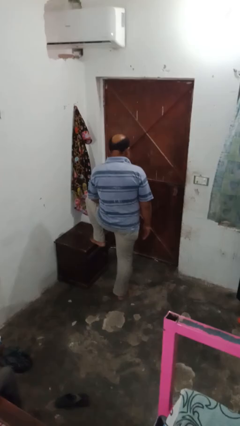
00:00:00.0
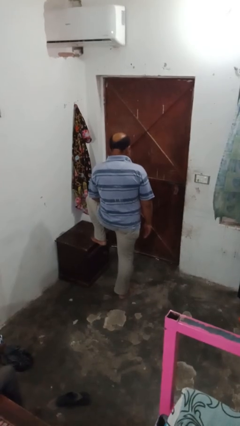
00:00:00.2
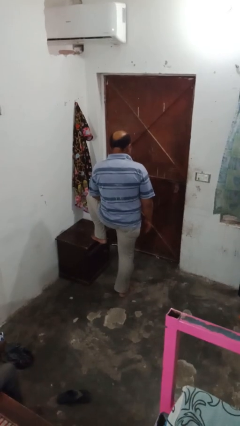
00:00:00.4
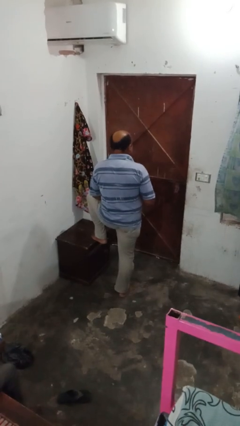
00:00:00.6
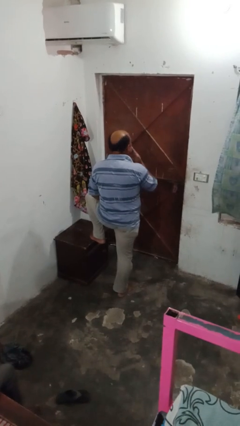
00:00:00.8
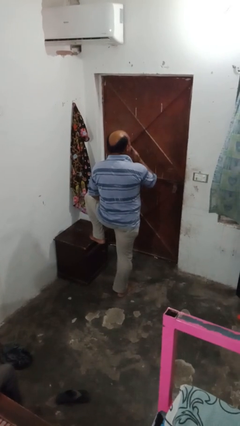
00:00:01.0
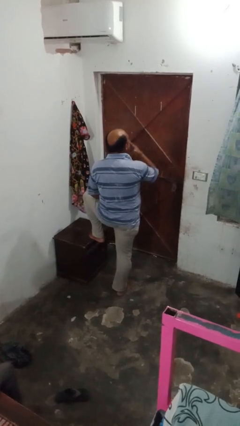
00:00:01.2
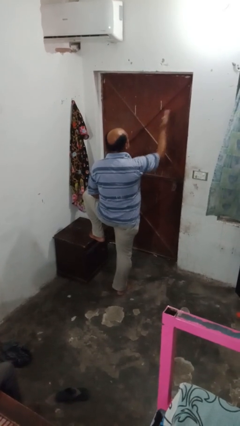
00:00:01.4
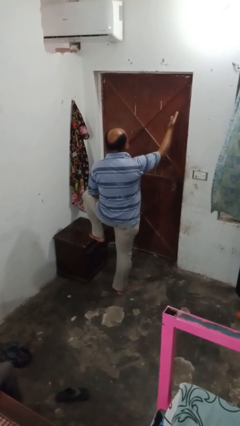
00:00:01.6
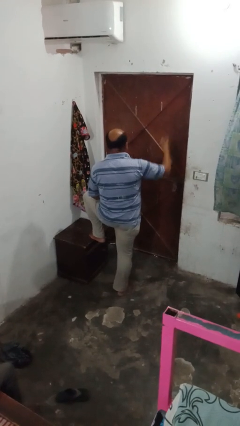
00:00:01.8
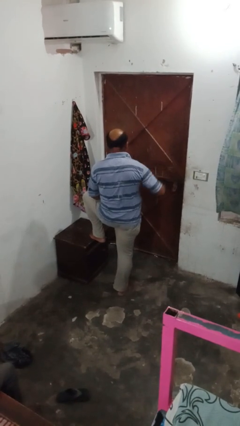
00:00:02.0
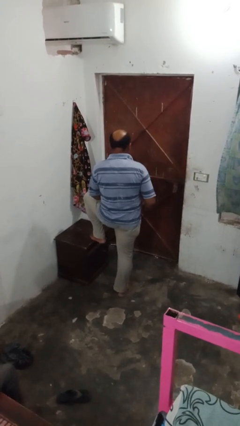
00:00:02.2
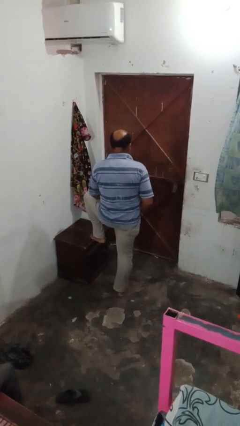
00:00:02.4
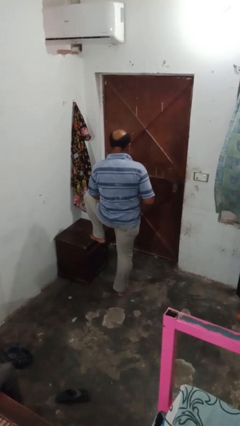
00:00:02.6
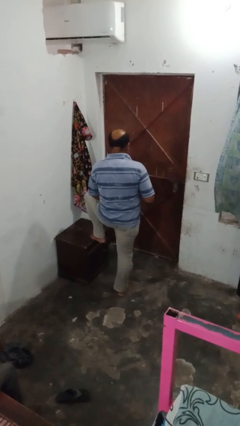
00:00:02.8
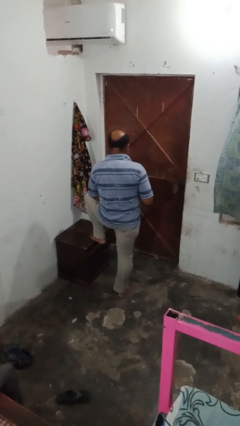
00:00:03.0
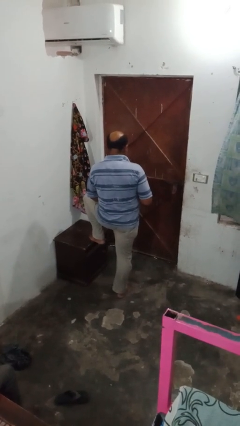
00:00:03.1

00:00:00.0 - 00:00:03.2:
person gestures blow kiss

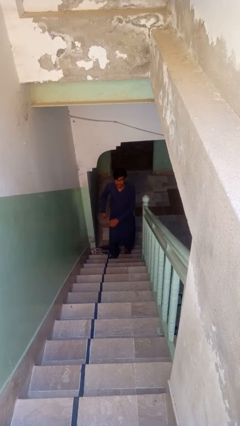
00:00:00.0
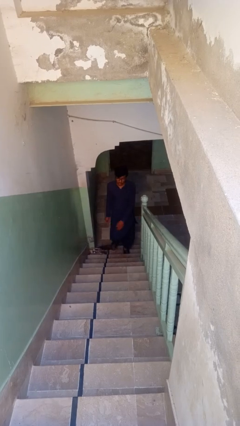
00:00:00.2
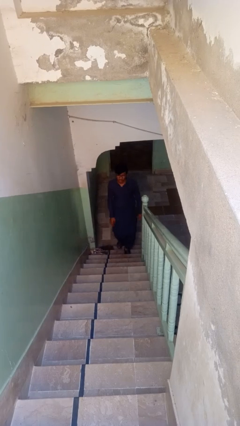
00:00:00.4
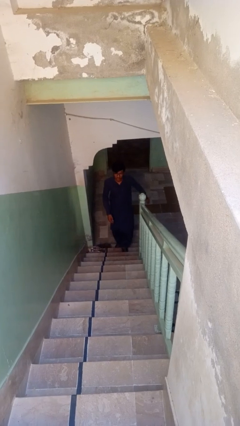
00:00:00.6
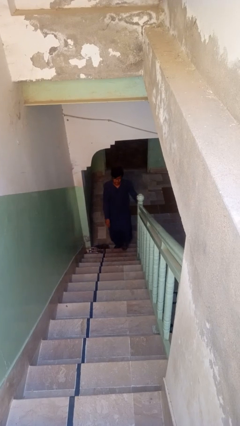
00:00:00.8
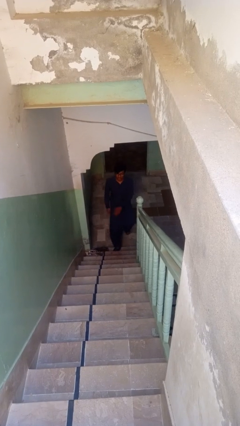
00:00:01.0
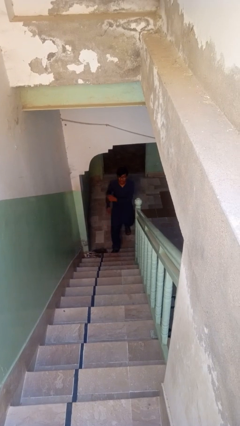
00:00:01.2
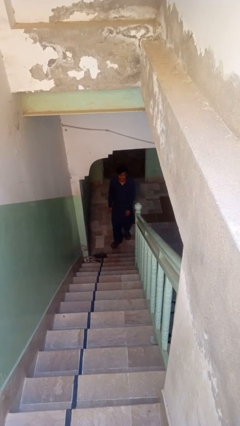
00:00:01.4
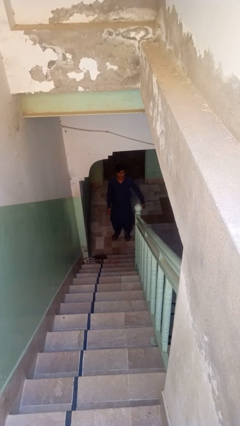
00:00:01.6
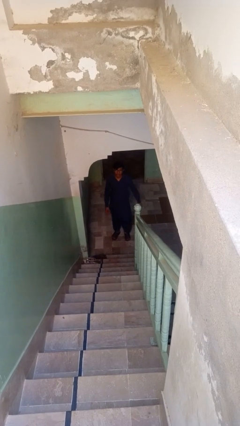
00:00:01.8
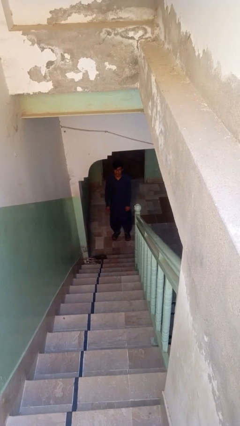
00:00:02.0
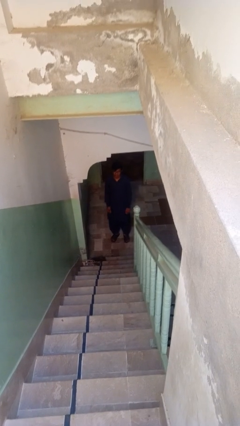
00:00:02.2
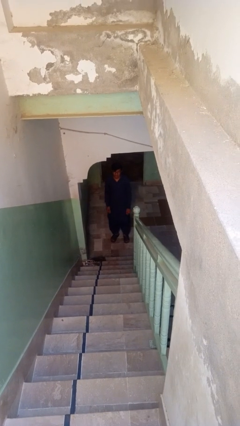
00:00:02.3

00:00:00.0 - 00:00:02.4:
person climbs down stairs

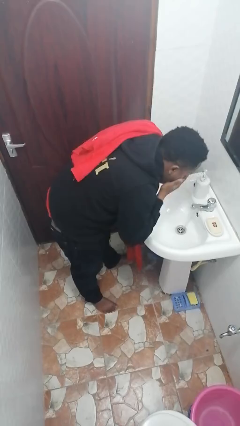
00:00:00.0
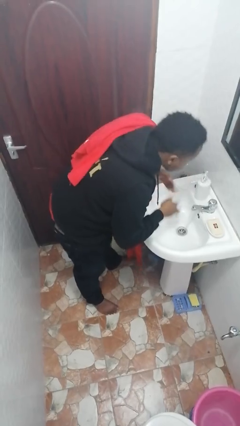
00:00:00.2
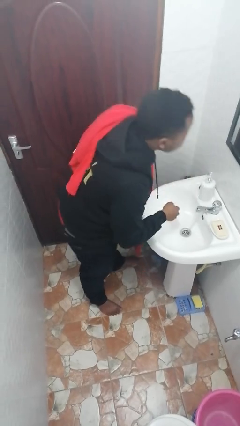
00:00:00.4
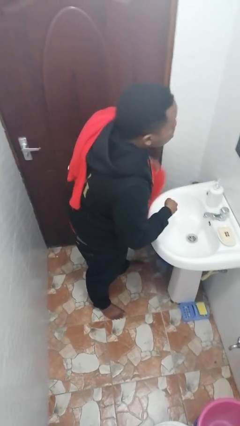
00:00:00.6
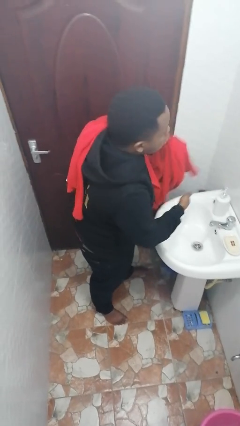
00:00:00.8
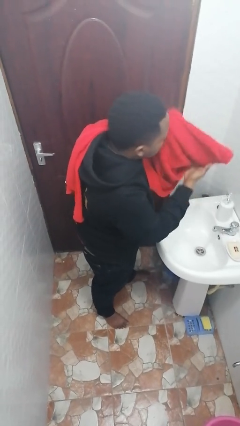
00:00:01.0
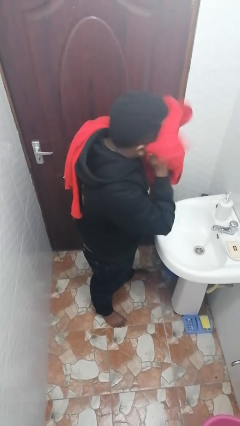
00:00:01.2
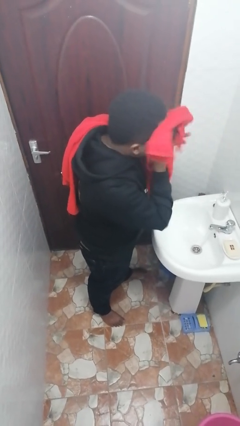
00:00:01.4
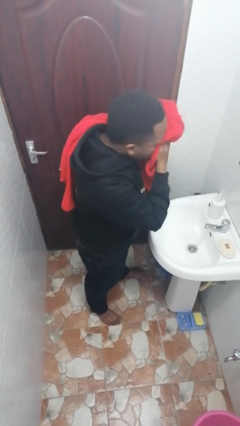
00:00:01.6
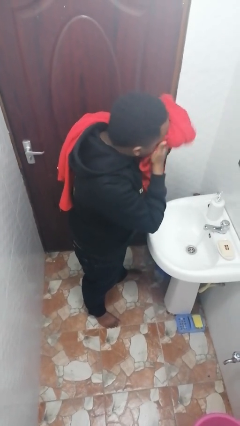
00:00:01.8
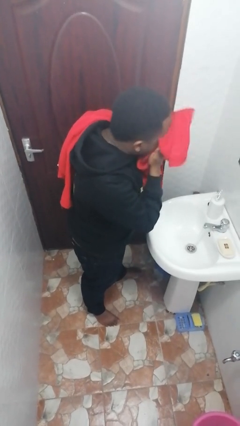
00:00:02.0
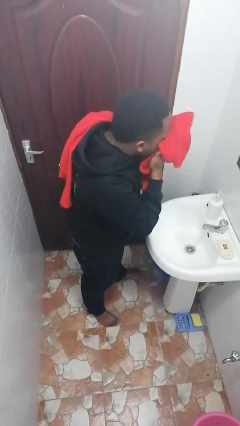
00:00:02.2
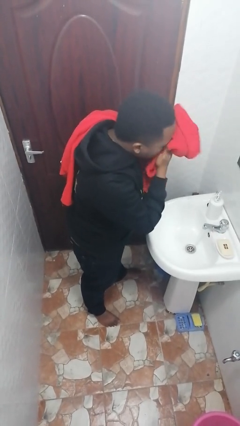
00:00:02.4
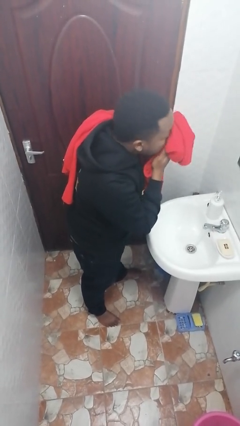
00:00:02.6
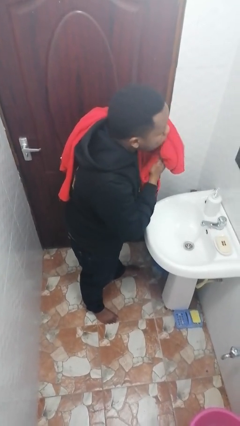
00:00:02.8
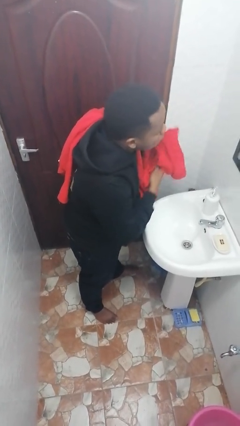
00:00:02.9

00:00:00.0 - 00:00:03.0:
person dries face with towel

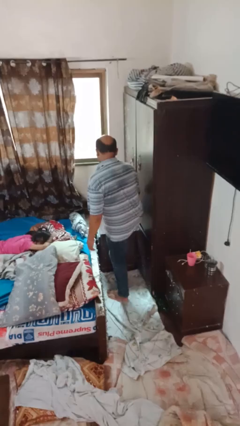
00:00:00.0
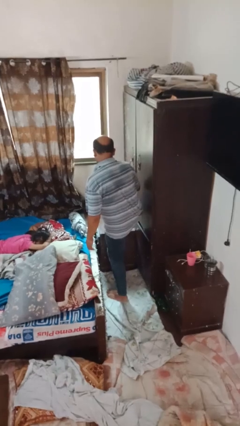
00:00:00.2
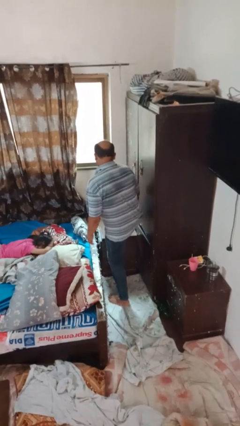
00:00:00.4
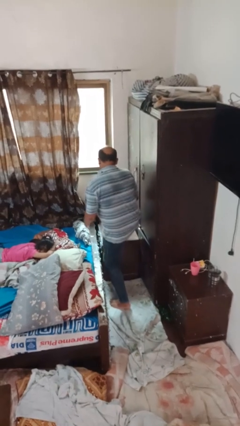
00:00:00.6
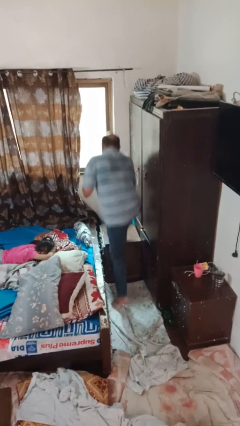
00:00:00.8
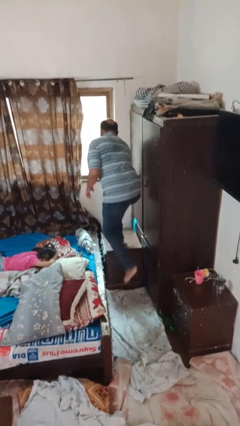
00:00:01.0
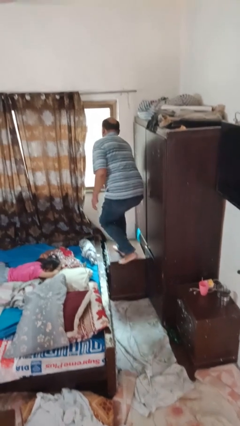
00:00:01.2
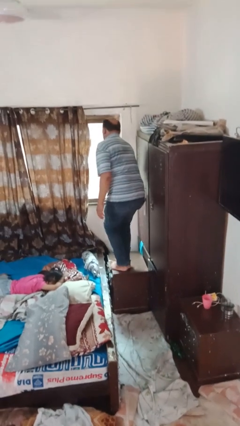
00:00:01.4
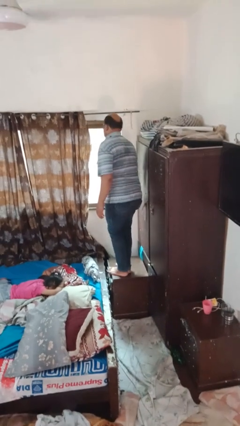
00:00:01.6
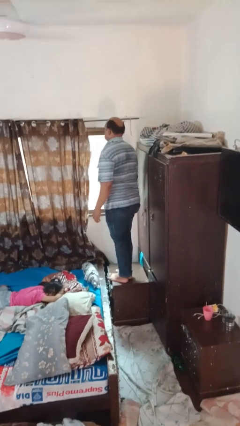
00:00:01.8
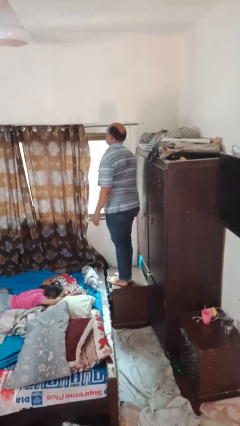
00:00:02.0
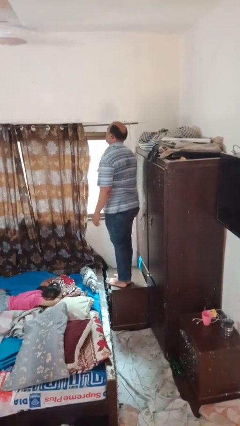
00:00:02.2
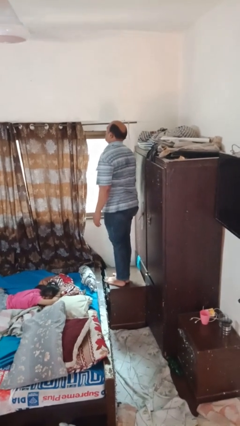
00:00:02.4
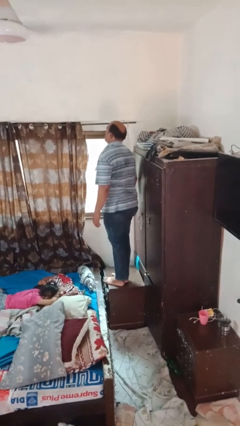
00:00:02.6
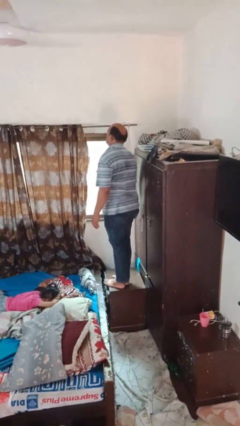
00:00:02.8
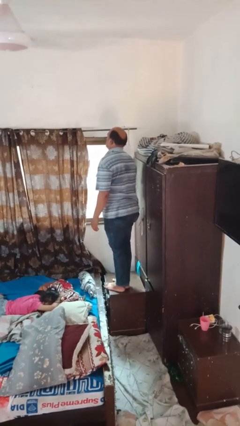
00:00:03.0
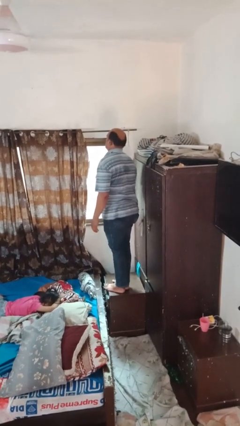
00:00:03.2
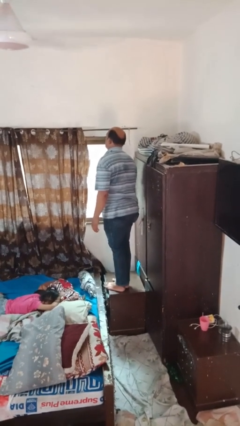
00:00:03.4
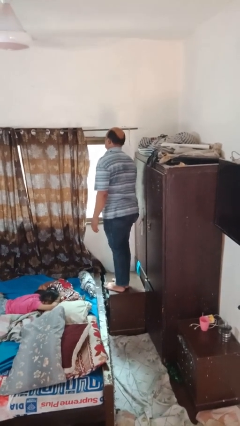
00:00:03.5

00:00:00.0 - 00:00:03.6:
person climbs on table

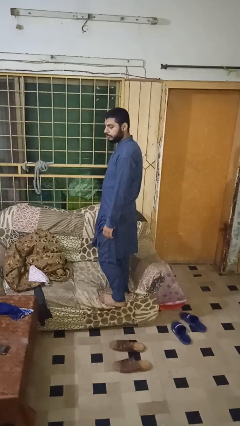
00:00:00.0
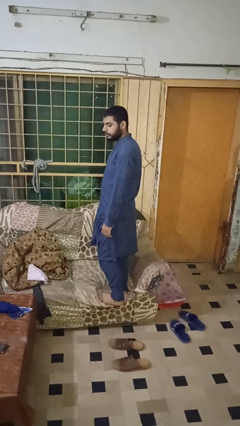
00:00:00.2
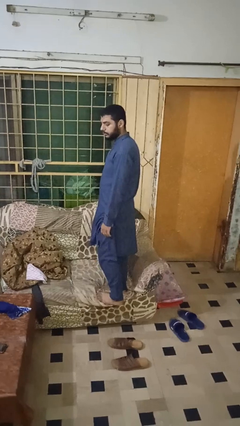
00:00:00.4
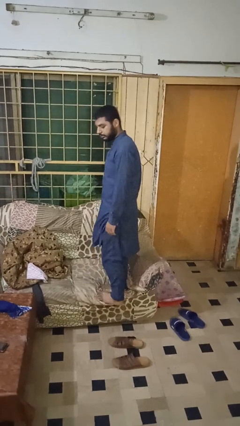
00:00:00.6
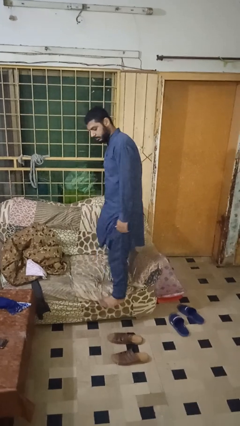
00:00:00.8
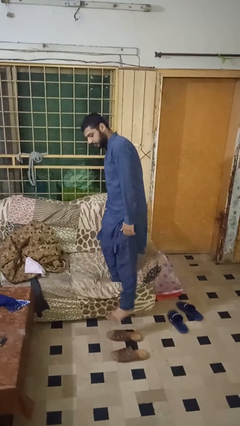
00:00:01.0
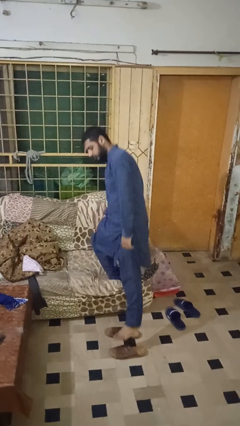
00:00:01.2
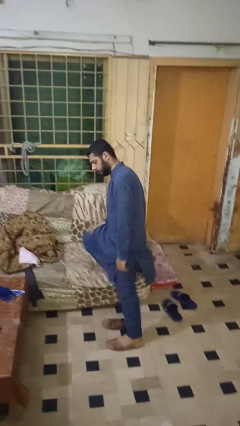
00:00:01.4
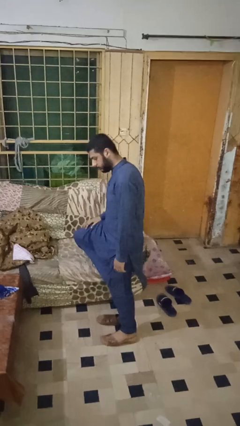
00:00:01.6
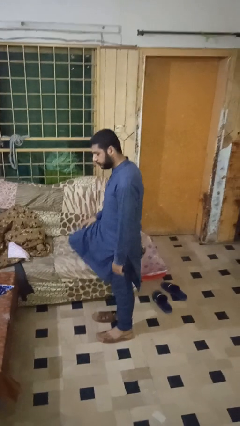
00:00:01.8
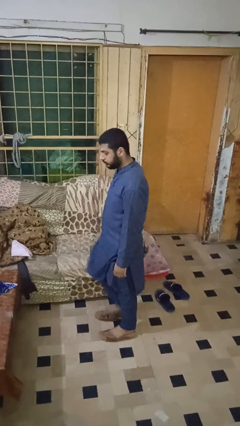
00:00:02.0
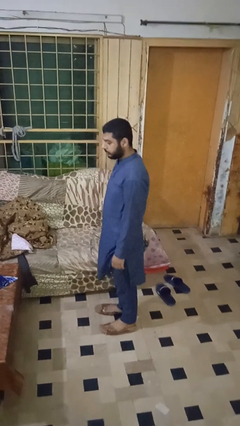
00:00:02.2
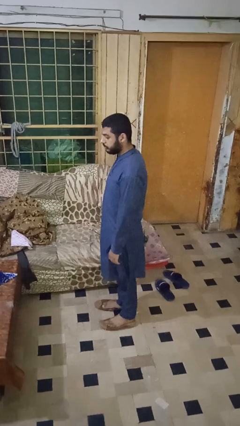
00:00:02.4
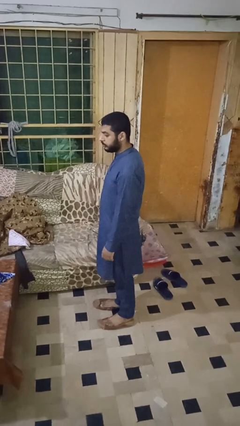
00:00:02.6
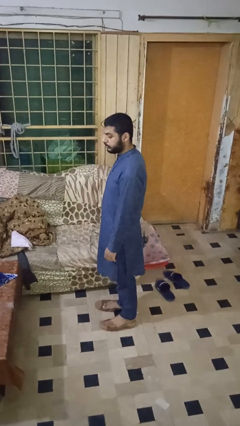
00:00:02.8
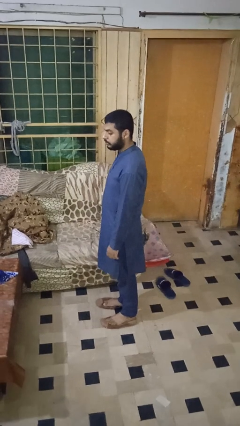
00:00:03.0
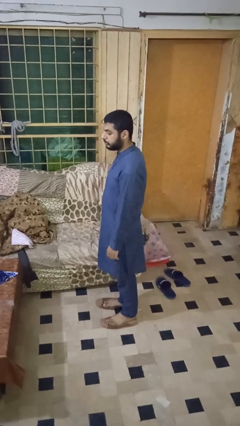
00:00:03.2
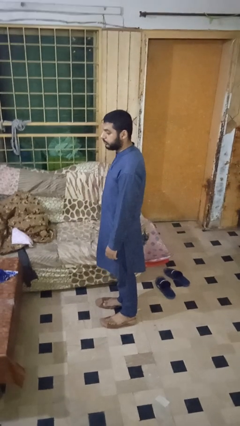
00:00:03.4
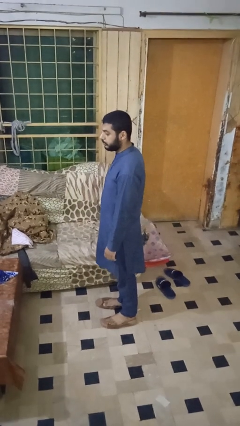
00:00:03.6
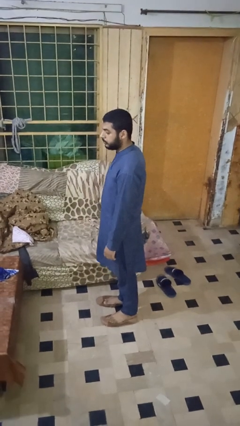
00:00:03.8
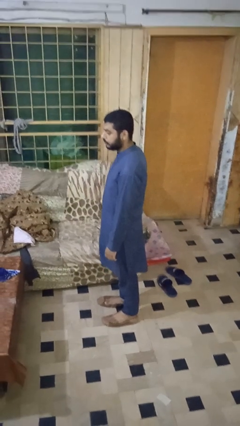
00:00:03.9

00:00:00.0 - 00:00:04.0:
person climbs off couch

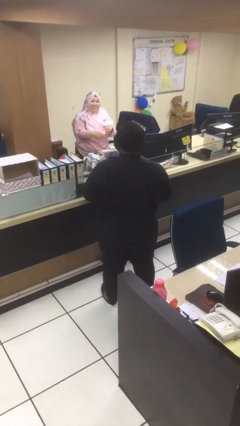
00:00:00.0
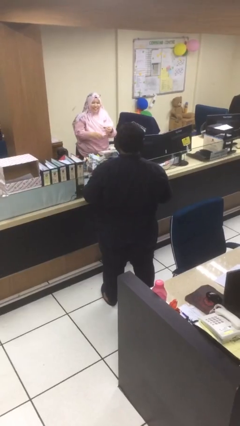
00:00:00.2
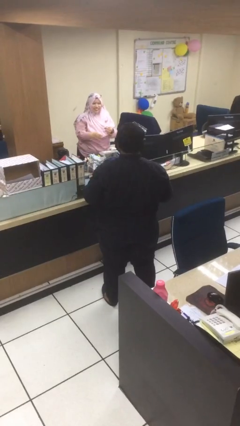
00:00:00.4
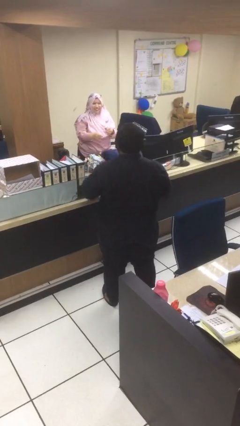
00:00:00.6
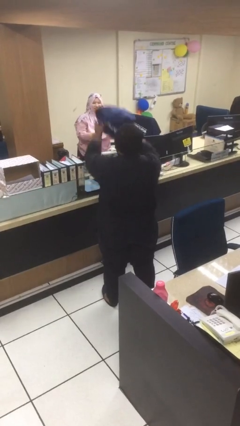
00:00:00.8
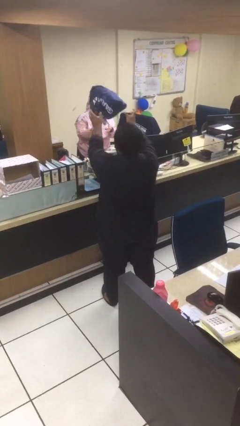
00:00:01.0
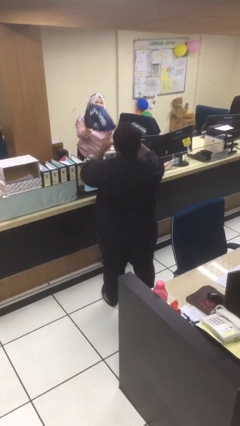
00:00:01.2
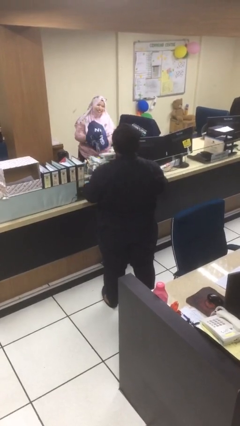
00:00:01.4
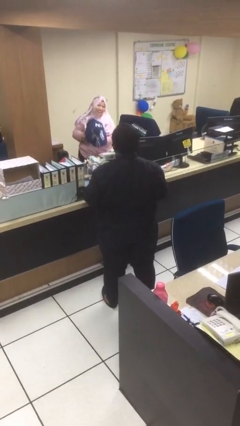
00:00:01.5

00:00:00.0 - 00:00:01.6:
person throws object to person
